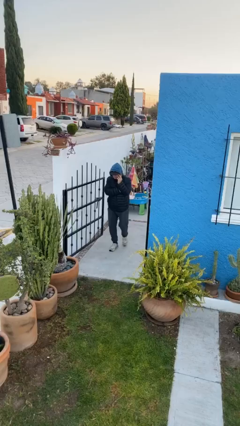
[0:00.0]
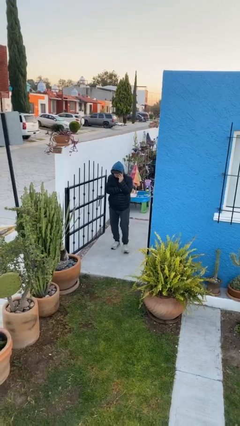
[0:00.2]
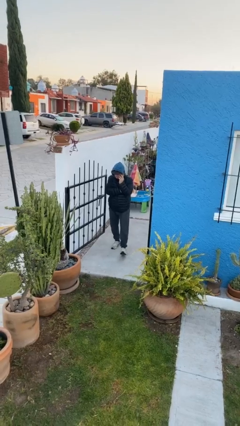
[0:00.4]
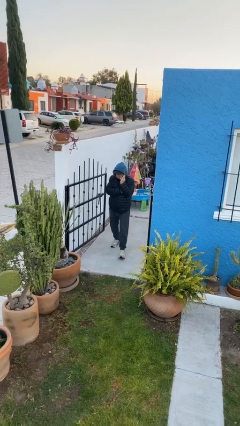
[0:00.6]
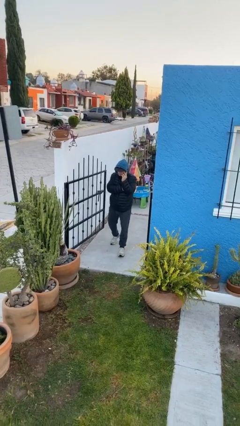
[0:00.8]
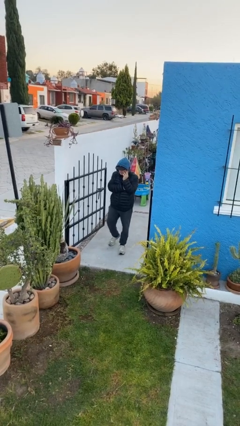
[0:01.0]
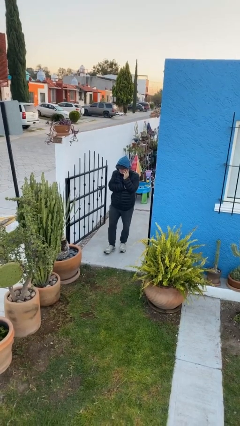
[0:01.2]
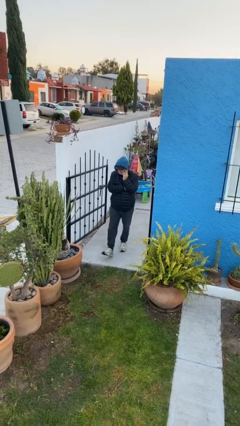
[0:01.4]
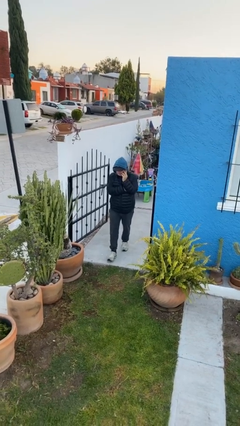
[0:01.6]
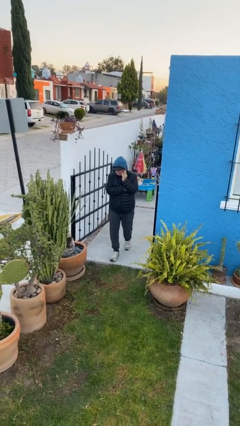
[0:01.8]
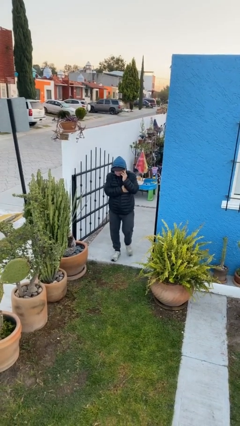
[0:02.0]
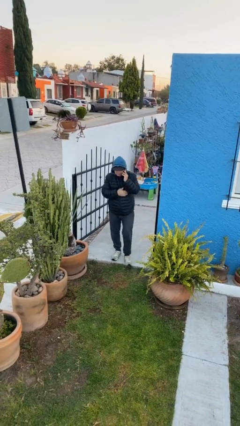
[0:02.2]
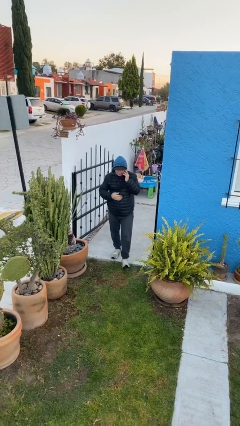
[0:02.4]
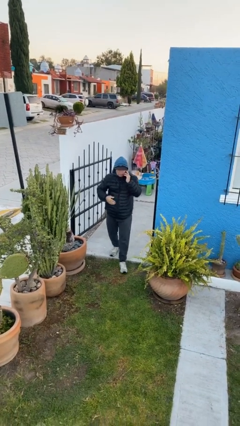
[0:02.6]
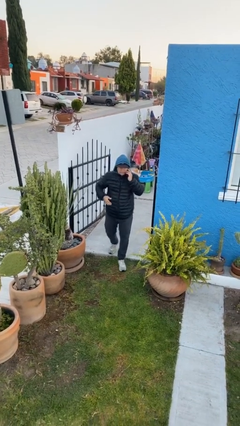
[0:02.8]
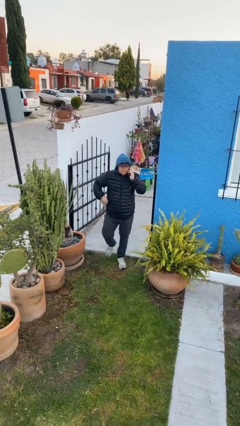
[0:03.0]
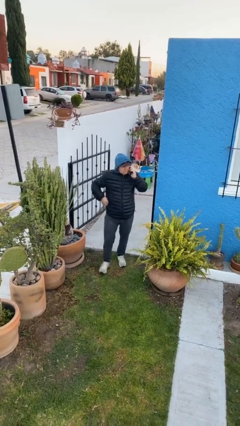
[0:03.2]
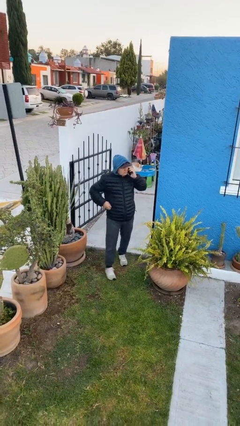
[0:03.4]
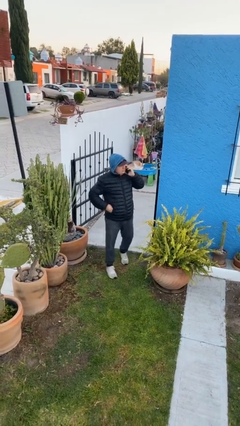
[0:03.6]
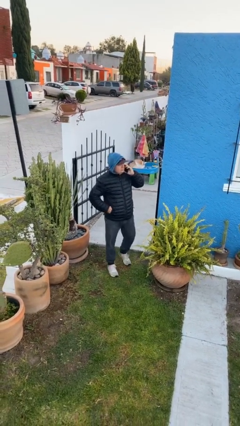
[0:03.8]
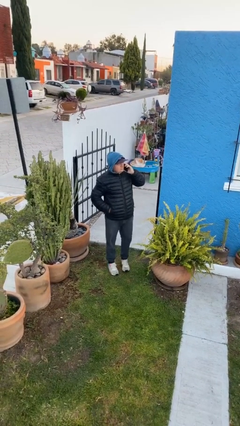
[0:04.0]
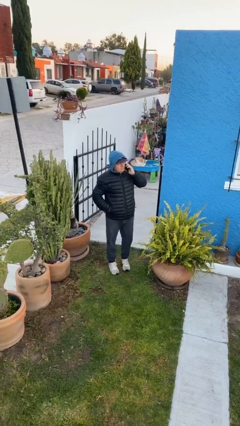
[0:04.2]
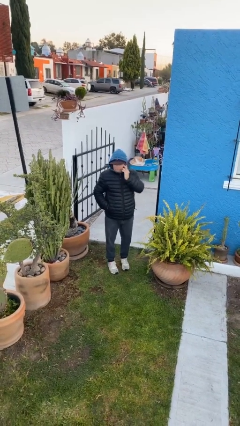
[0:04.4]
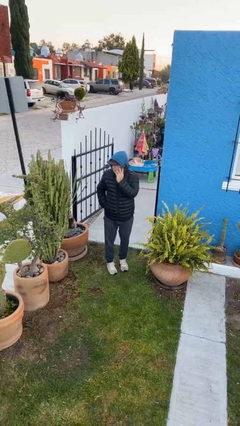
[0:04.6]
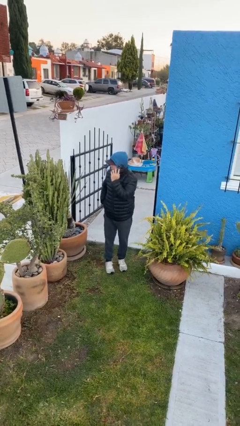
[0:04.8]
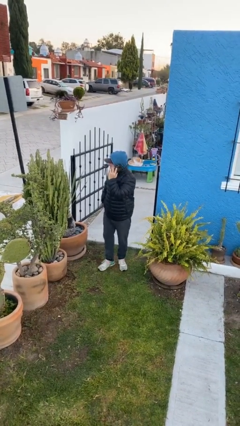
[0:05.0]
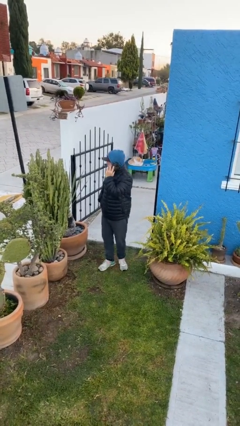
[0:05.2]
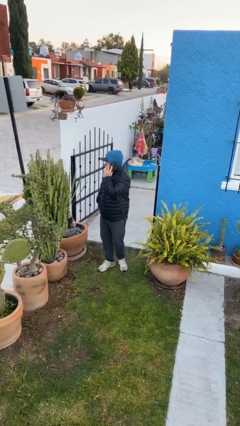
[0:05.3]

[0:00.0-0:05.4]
person enters scene through structure

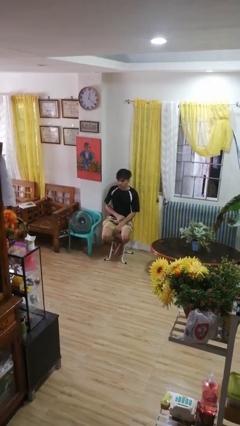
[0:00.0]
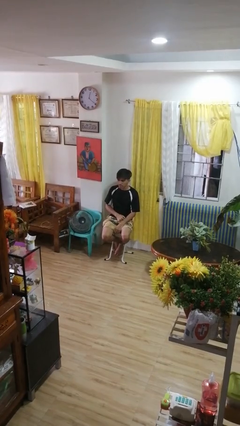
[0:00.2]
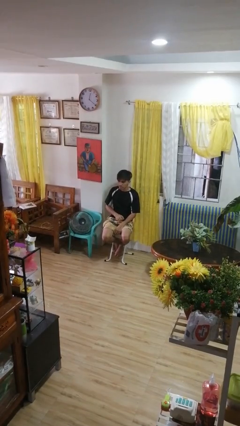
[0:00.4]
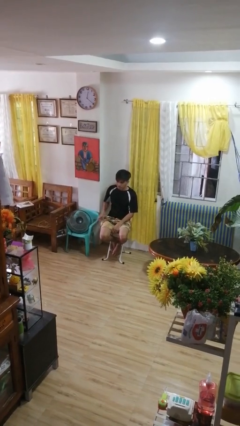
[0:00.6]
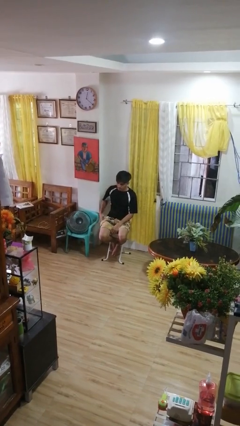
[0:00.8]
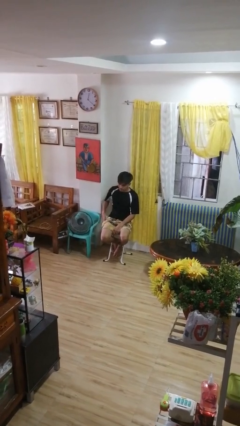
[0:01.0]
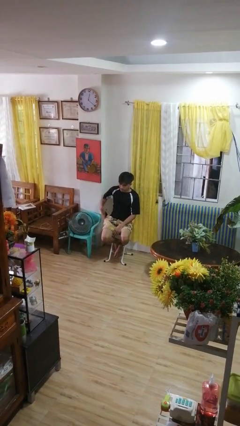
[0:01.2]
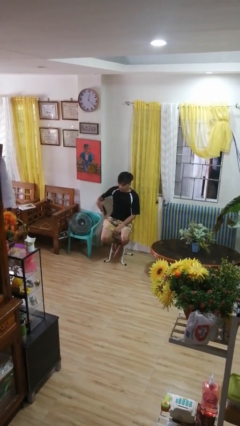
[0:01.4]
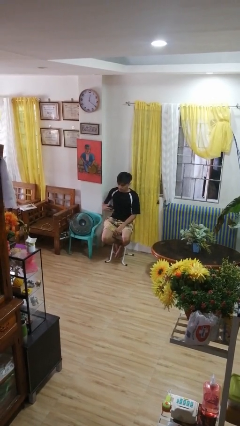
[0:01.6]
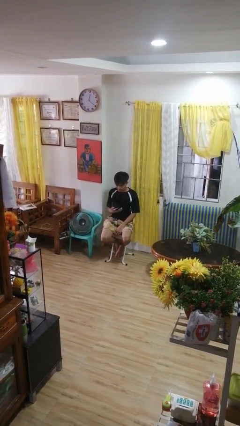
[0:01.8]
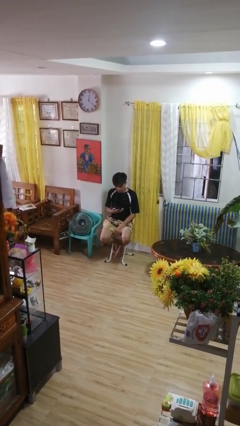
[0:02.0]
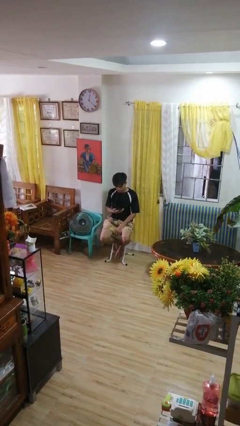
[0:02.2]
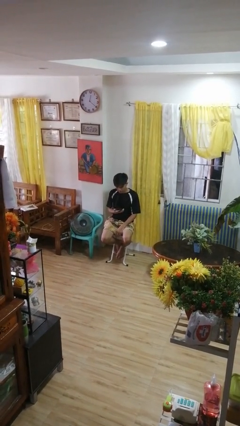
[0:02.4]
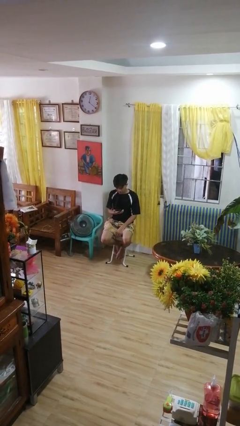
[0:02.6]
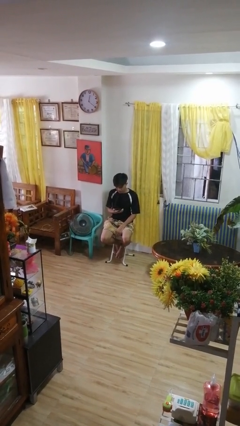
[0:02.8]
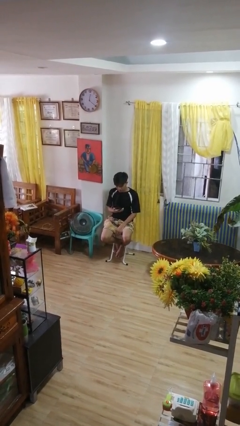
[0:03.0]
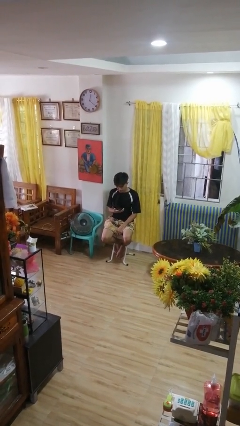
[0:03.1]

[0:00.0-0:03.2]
person takes phone from pocket

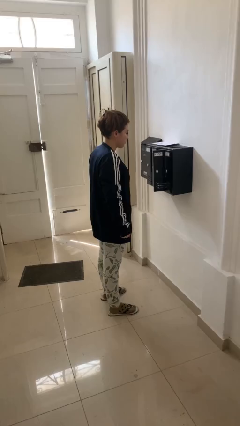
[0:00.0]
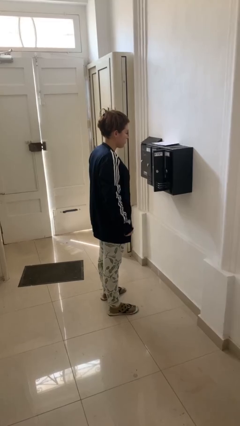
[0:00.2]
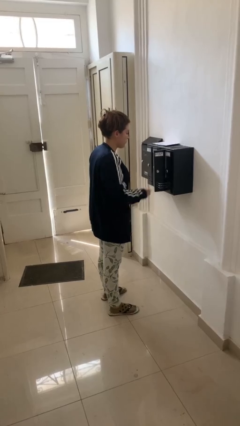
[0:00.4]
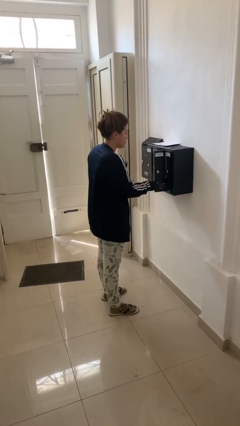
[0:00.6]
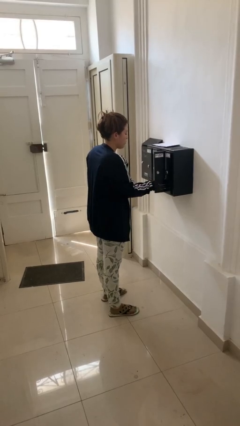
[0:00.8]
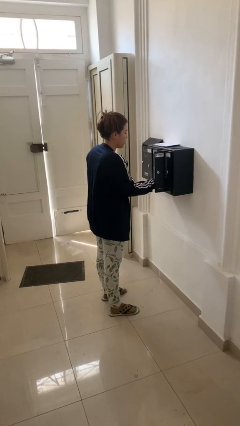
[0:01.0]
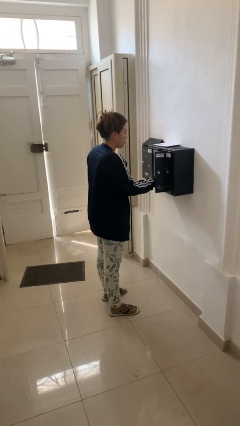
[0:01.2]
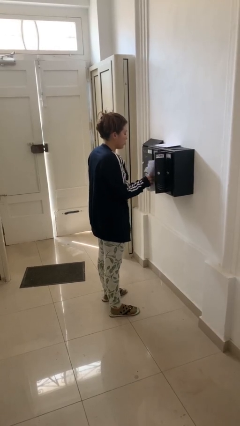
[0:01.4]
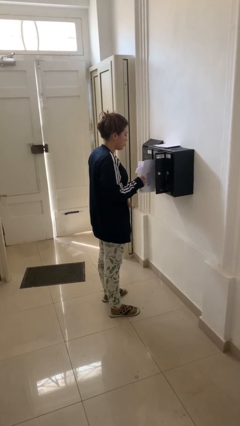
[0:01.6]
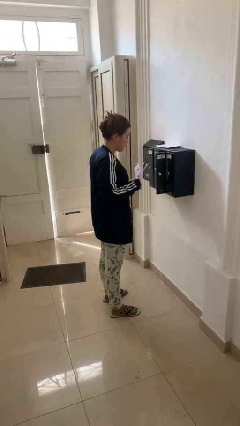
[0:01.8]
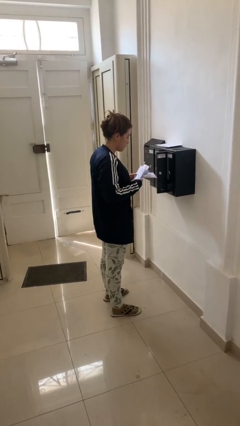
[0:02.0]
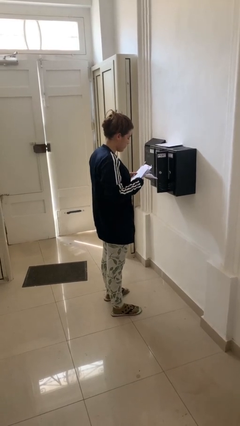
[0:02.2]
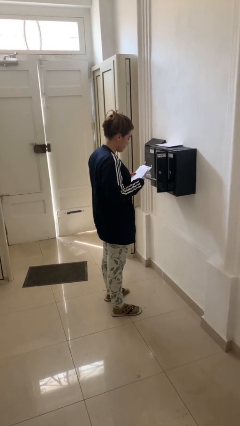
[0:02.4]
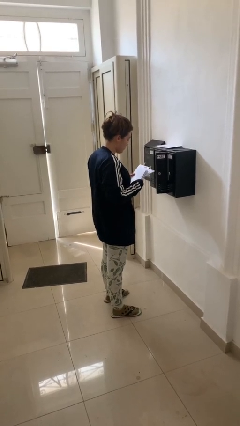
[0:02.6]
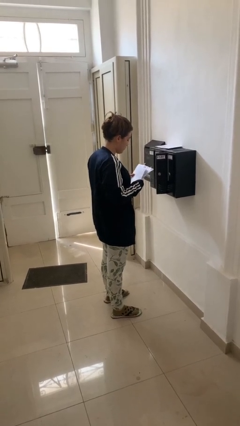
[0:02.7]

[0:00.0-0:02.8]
person takes letters from mailbox

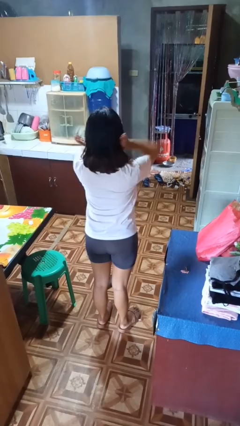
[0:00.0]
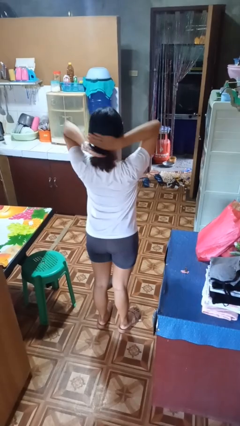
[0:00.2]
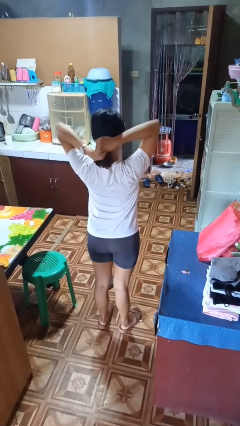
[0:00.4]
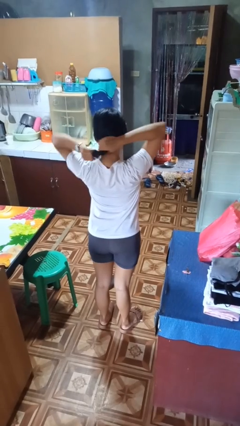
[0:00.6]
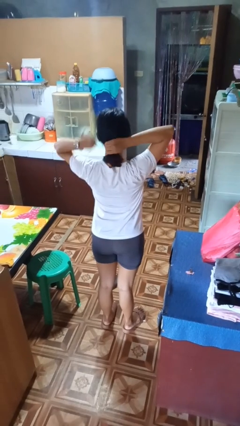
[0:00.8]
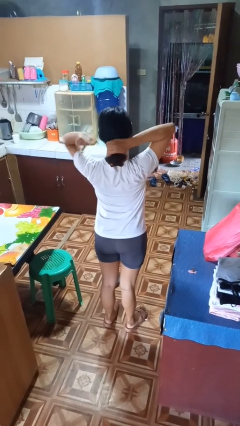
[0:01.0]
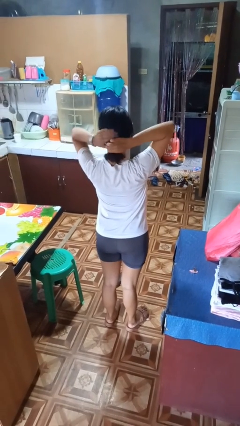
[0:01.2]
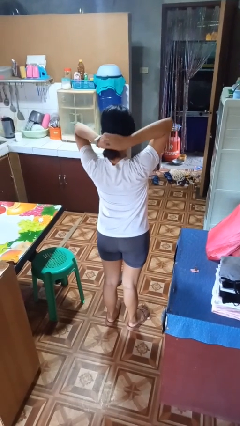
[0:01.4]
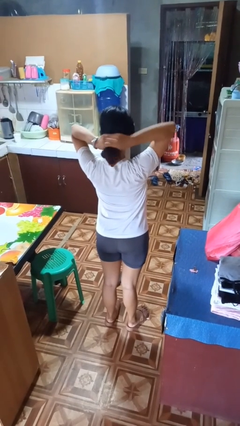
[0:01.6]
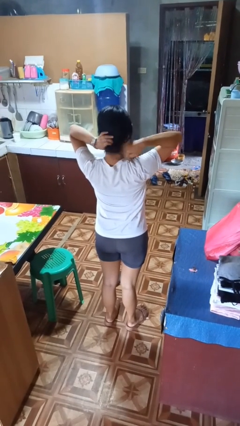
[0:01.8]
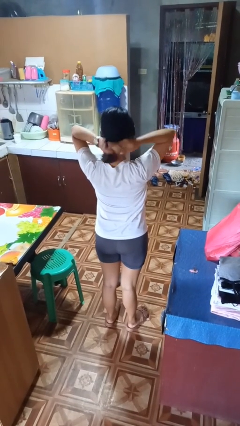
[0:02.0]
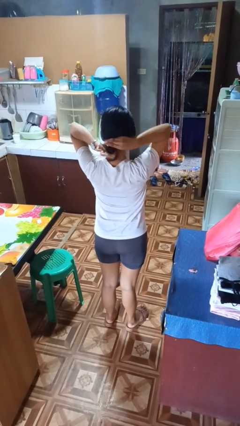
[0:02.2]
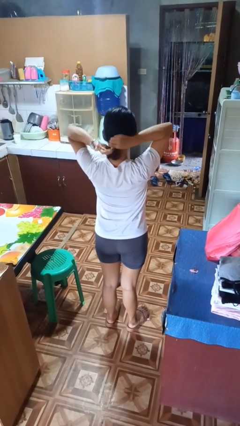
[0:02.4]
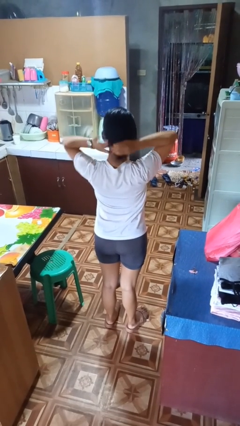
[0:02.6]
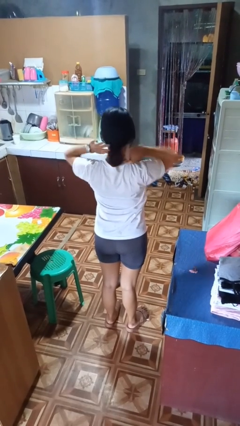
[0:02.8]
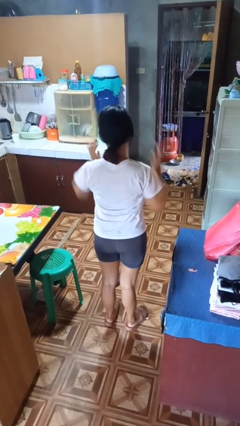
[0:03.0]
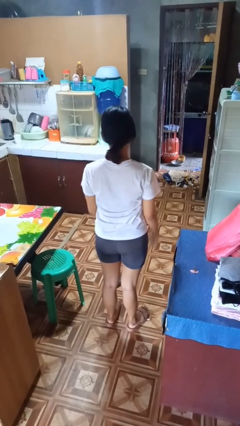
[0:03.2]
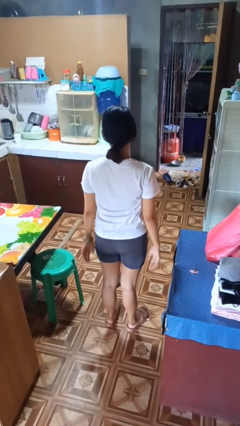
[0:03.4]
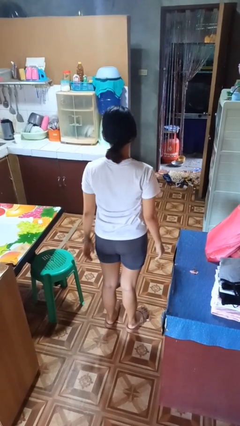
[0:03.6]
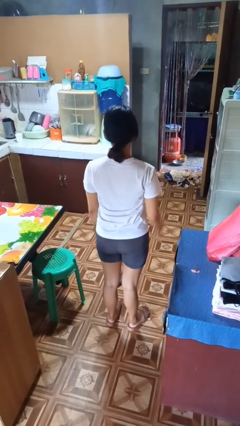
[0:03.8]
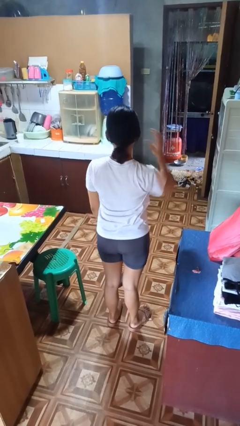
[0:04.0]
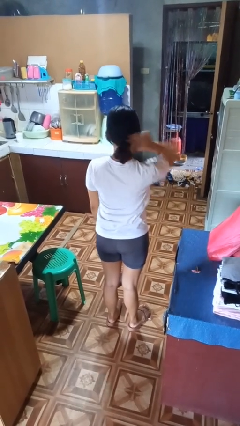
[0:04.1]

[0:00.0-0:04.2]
person puts hair in ponytail

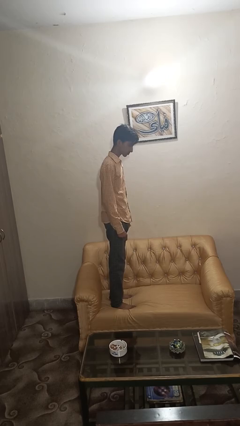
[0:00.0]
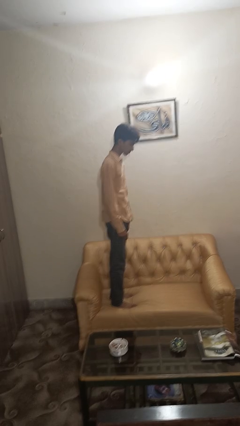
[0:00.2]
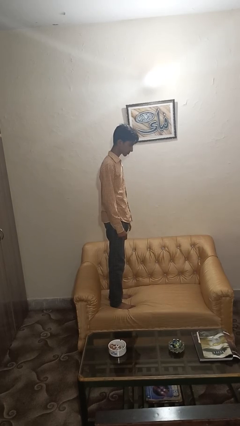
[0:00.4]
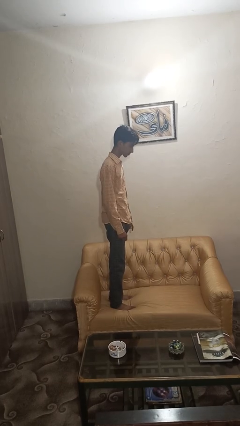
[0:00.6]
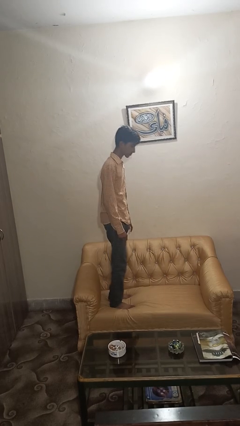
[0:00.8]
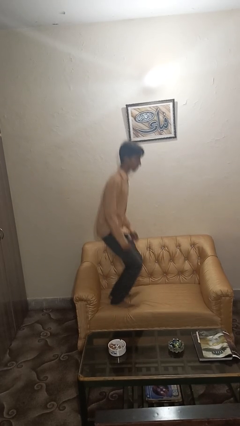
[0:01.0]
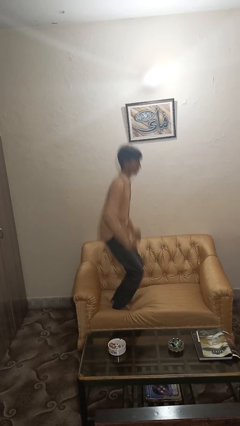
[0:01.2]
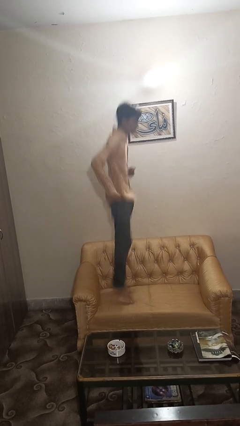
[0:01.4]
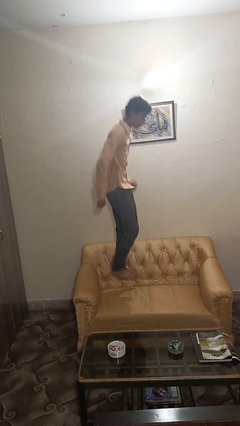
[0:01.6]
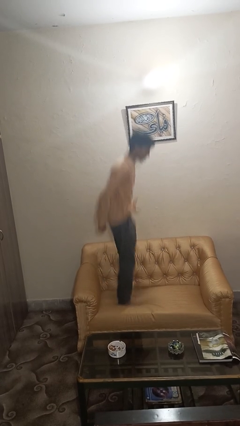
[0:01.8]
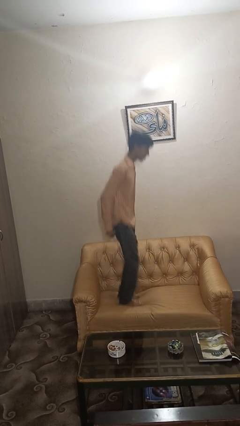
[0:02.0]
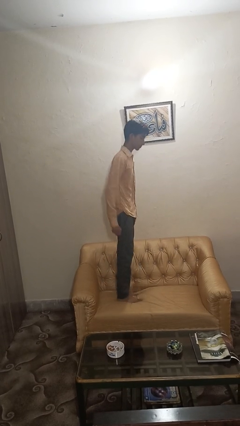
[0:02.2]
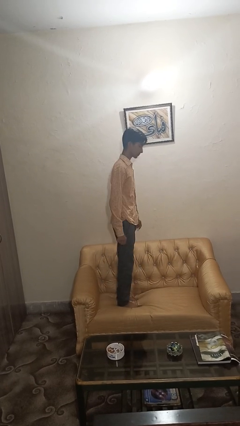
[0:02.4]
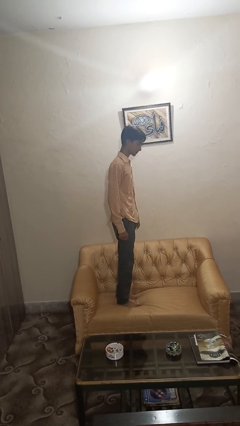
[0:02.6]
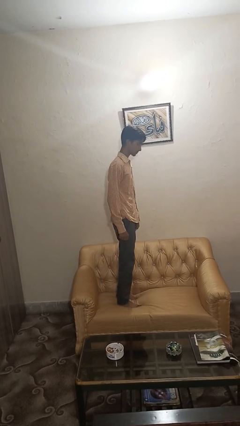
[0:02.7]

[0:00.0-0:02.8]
person jumps on couch
